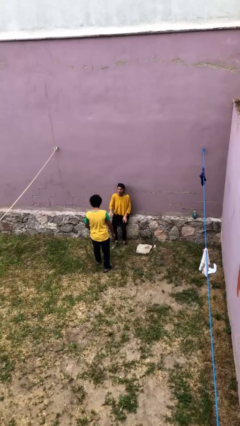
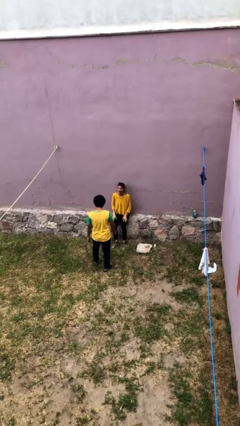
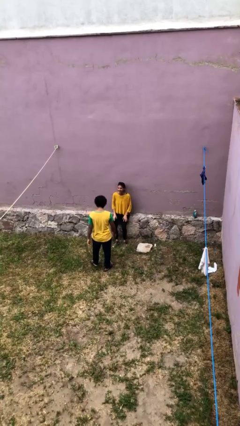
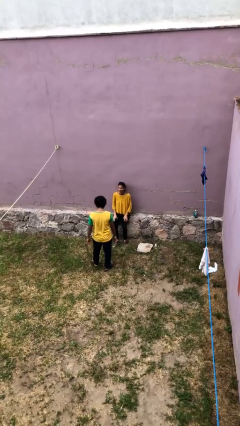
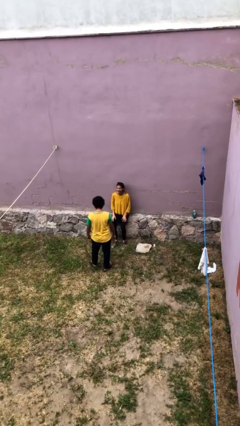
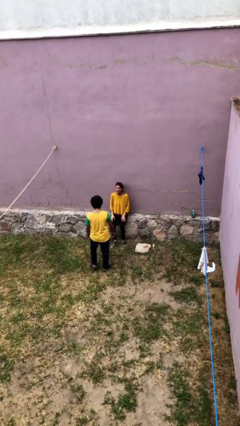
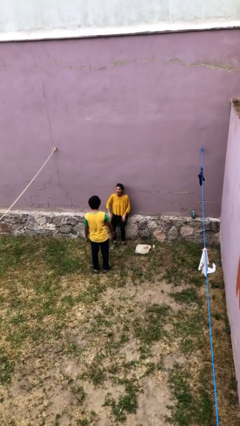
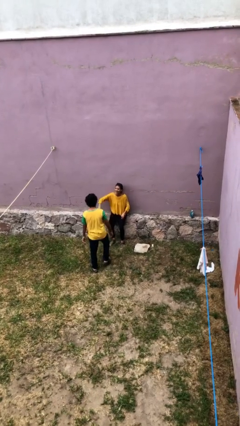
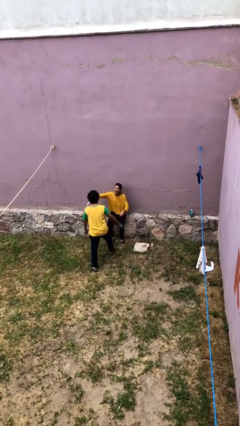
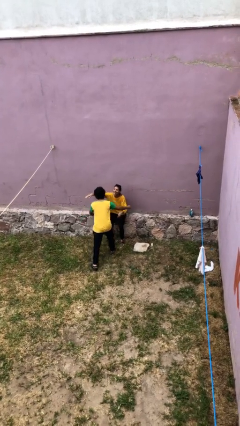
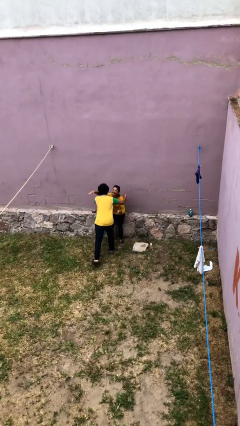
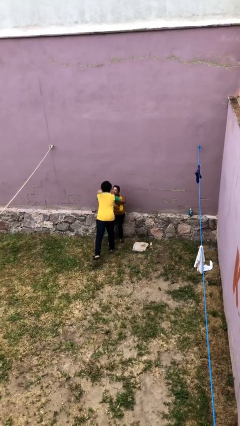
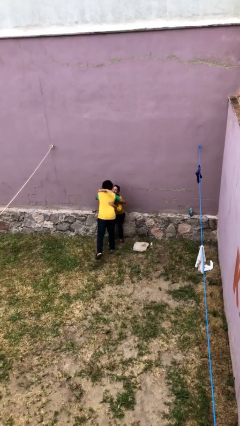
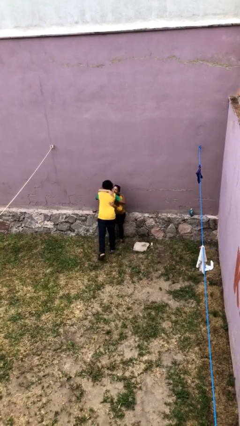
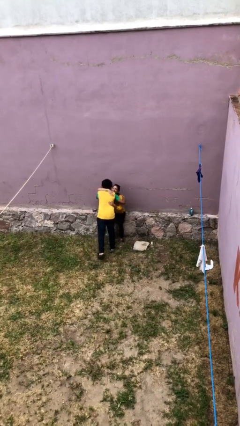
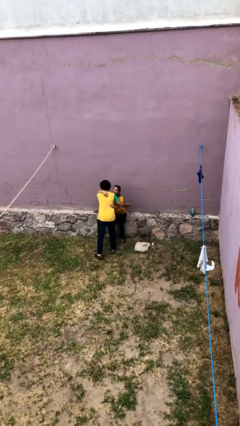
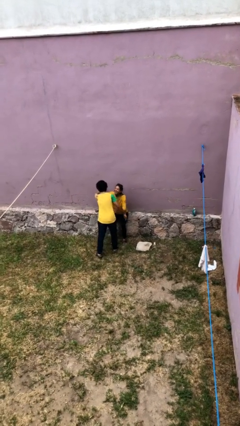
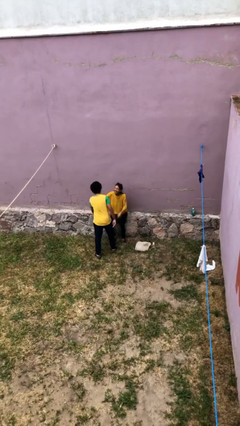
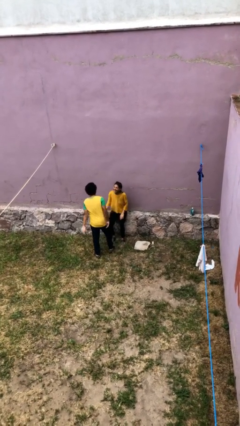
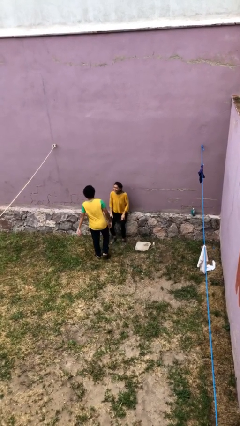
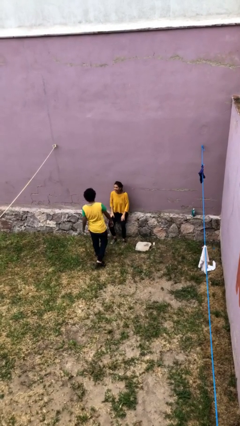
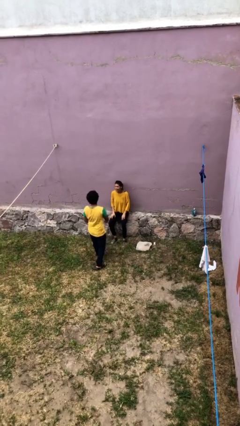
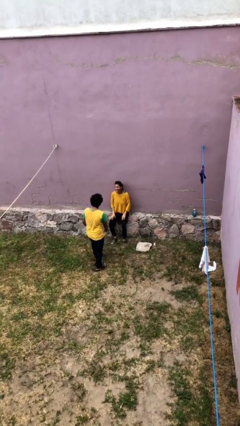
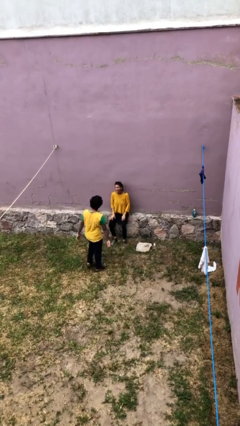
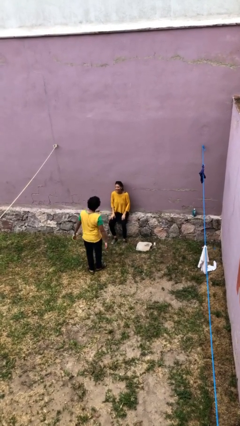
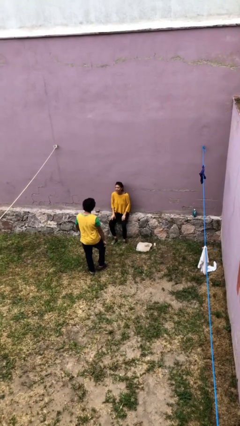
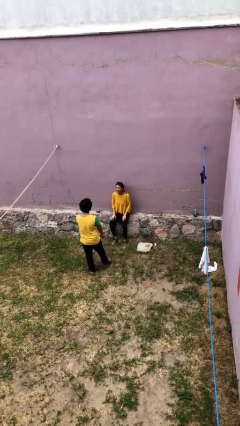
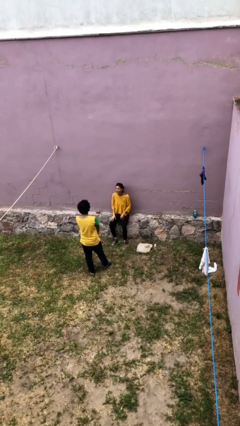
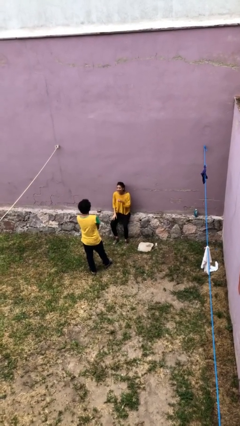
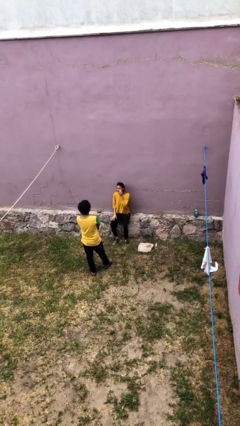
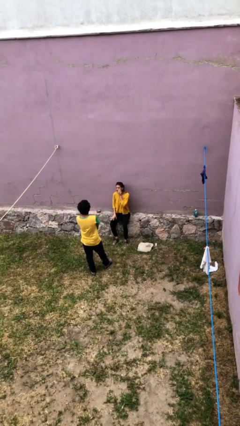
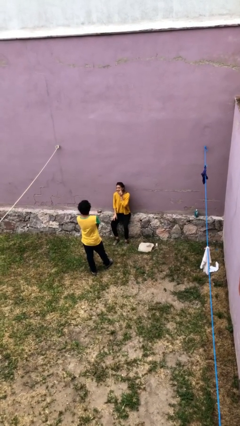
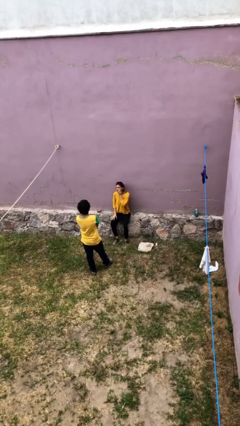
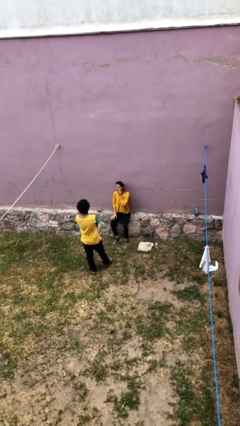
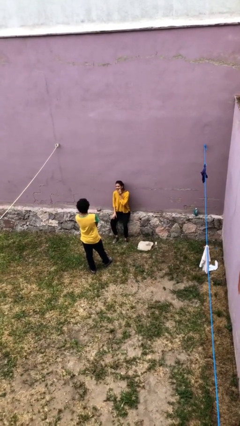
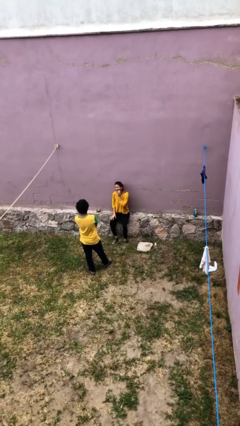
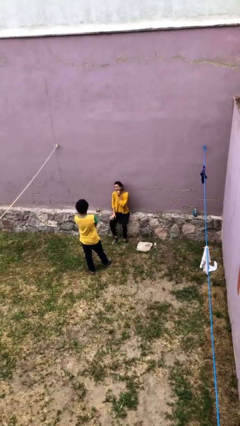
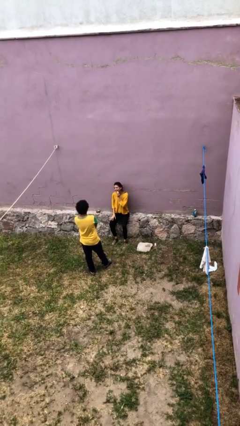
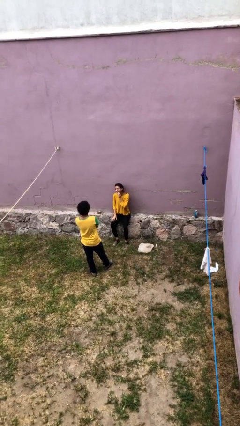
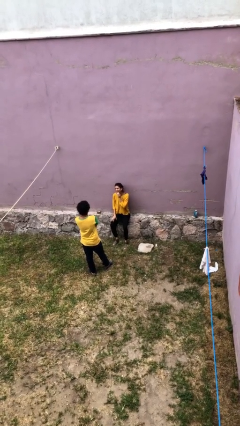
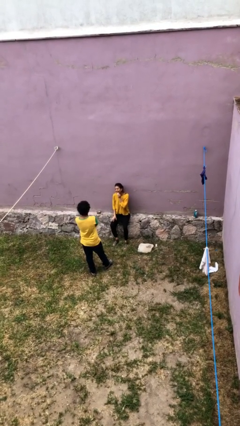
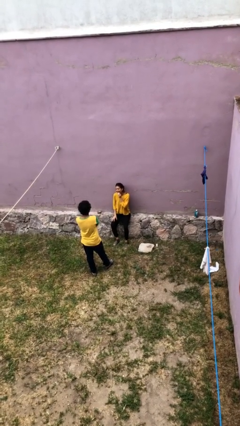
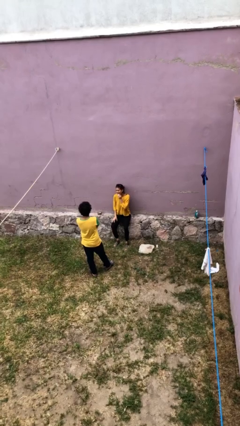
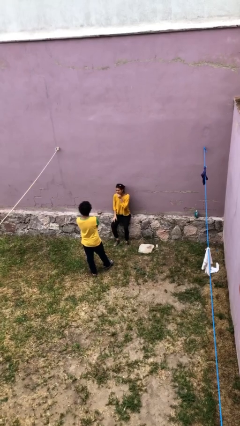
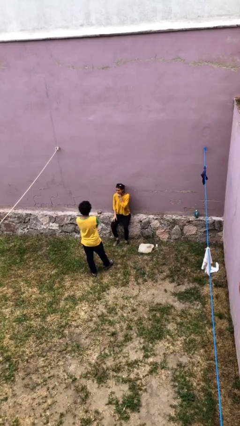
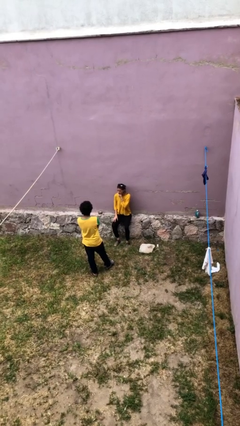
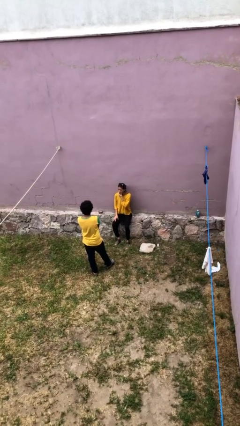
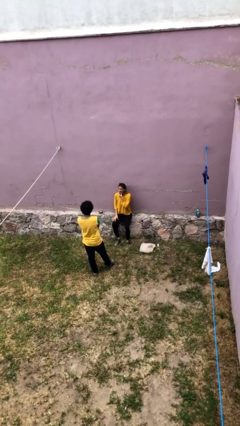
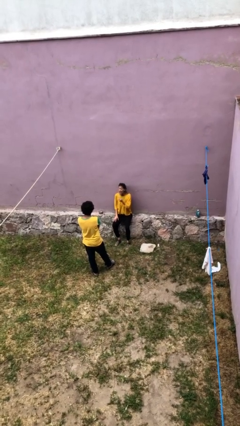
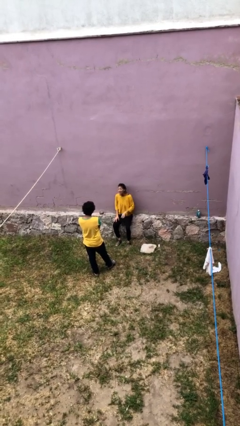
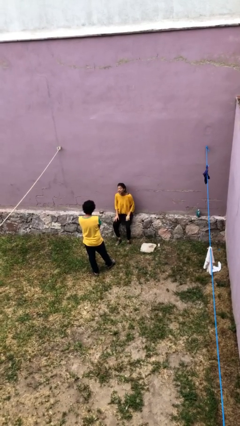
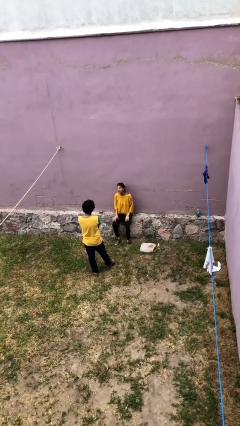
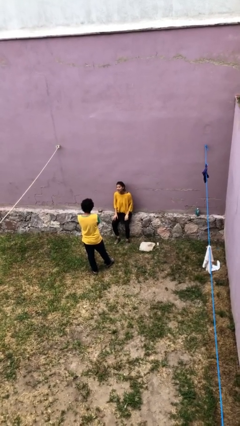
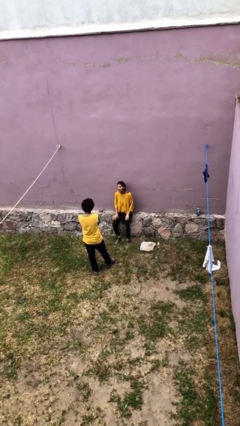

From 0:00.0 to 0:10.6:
person embraces person

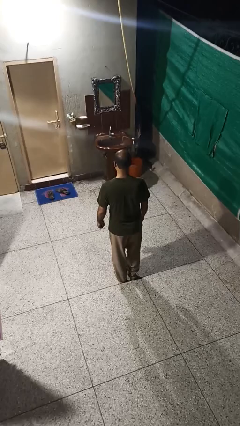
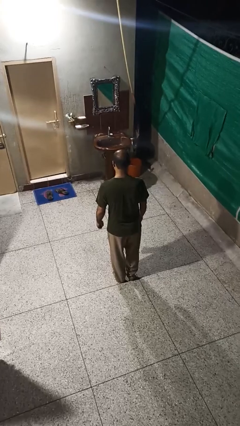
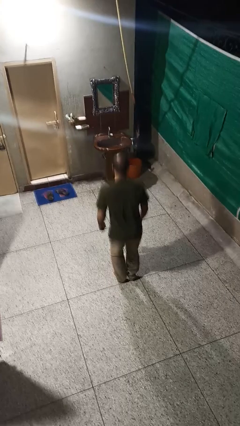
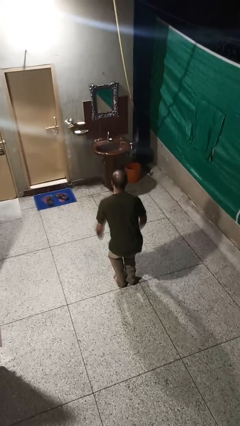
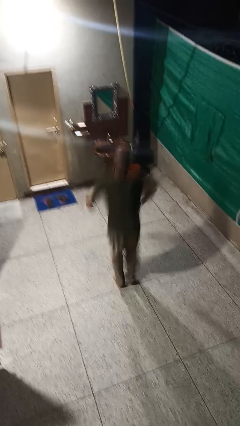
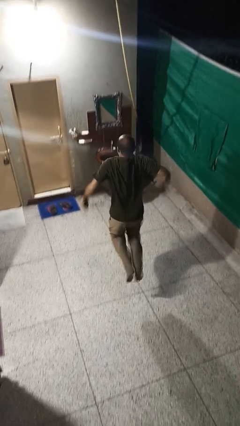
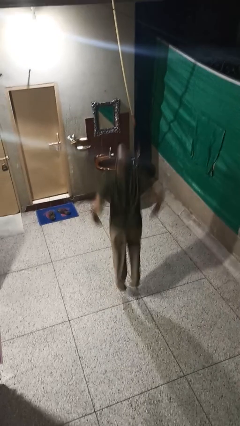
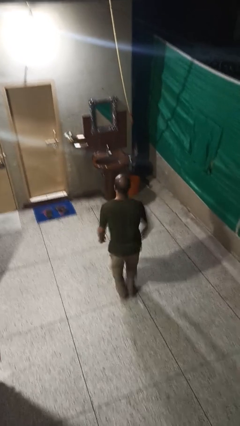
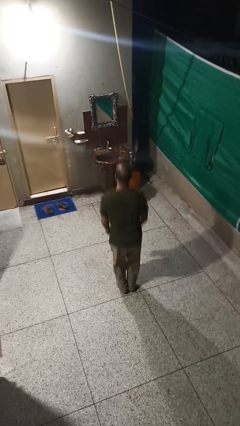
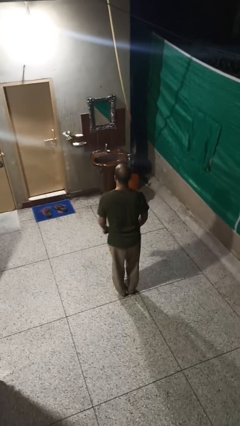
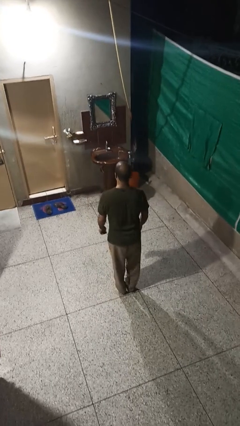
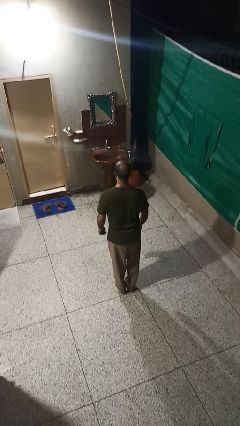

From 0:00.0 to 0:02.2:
person jumps

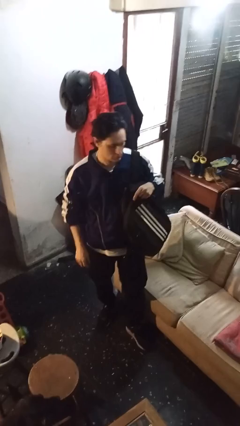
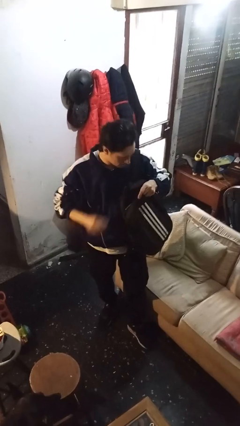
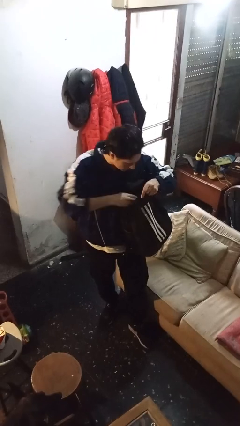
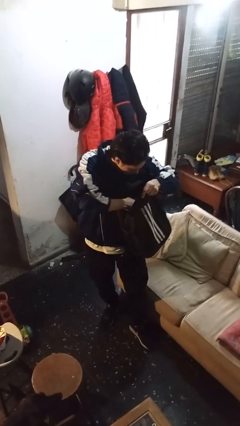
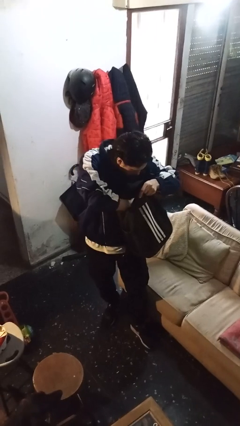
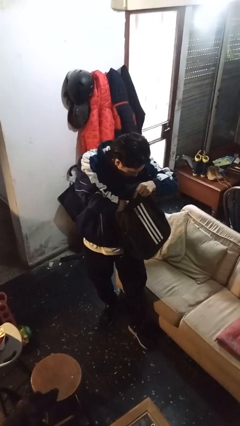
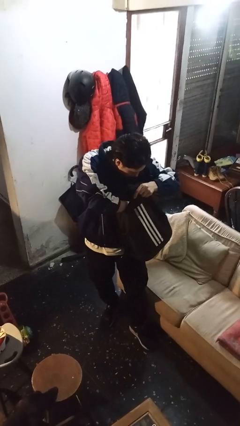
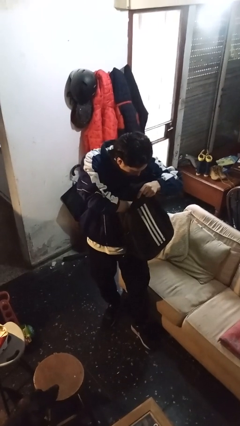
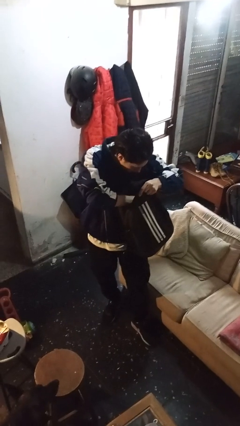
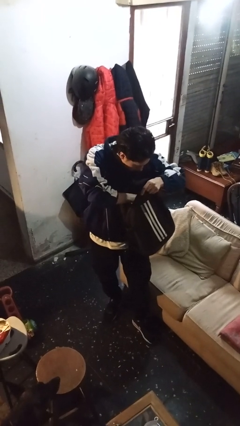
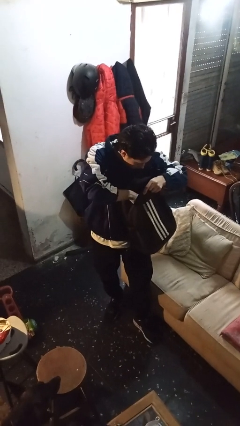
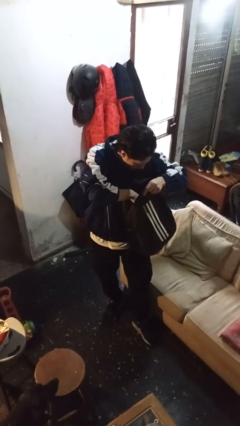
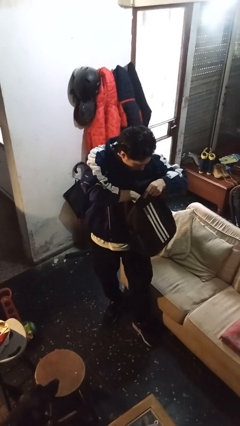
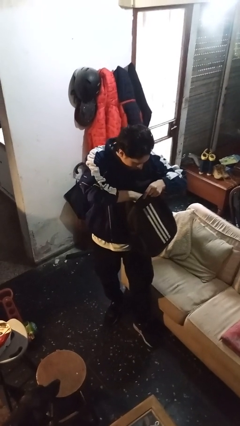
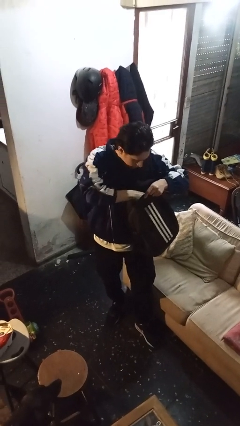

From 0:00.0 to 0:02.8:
person searches in backpack

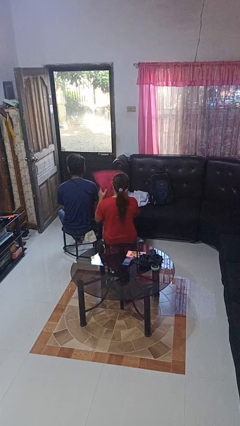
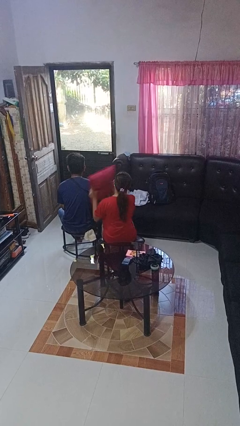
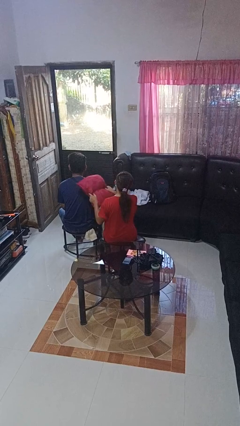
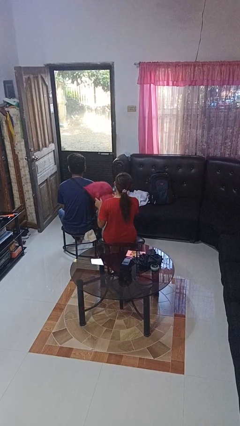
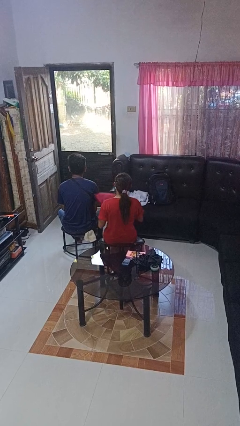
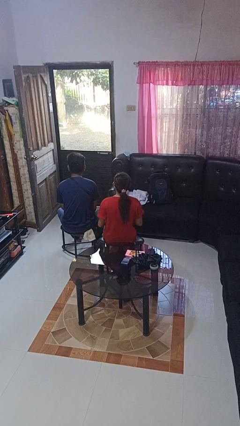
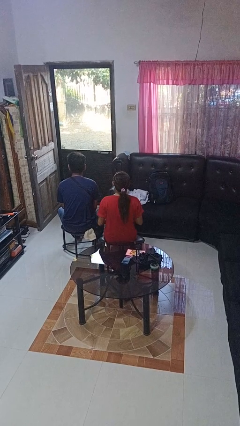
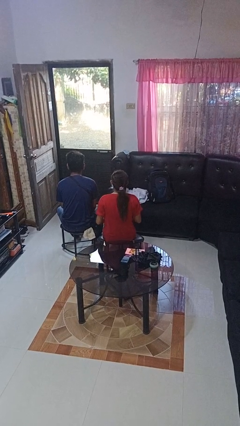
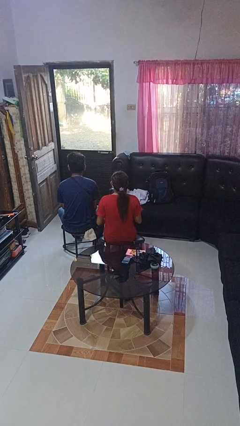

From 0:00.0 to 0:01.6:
person hits person with pillow

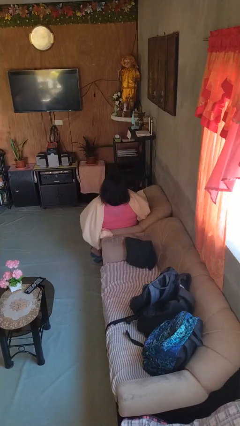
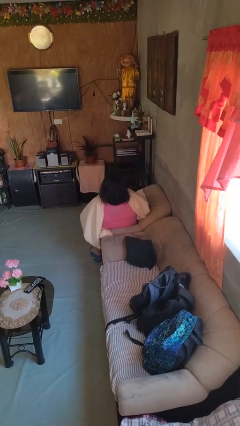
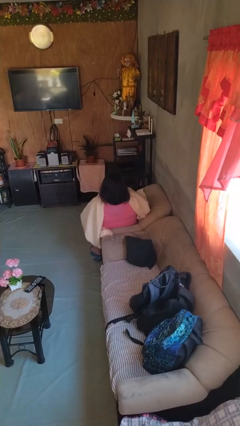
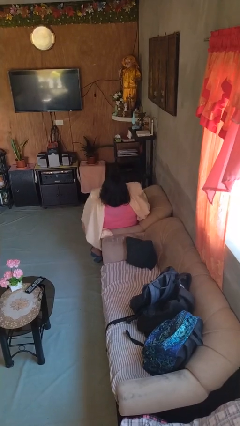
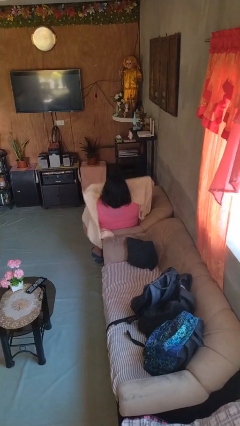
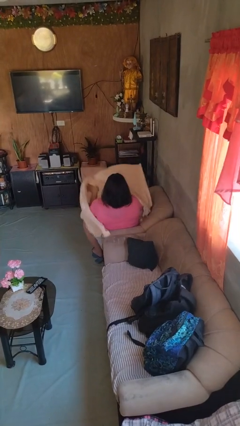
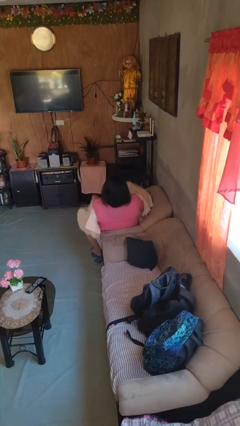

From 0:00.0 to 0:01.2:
person uncovers with blanket
